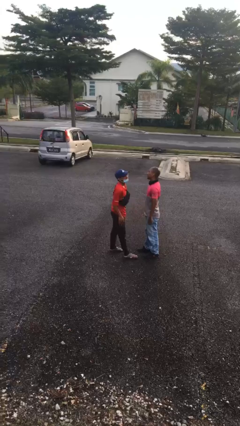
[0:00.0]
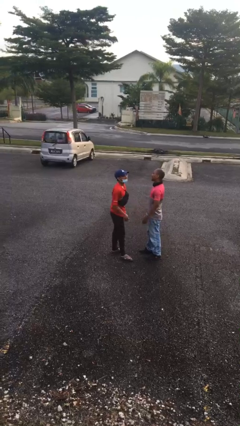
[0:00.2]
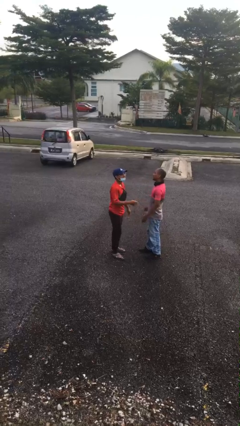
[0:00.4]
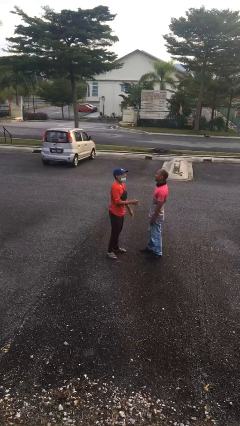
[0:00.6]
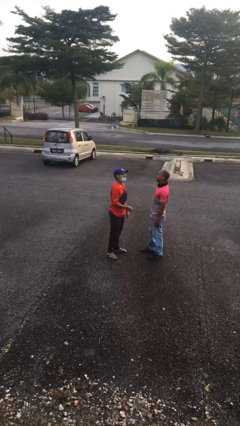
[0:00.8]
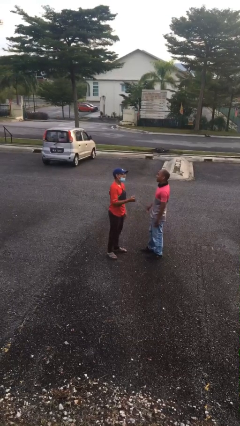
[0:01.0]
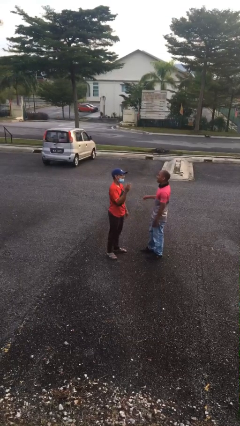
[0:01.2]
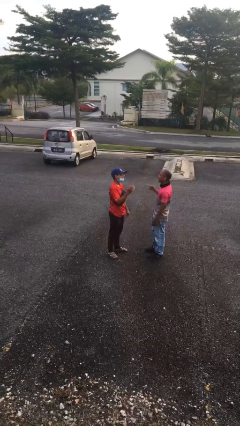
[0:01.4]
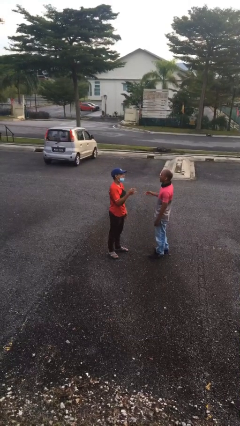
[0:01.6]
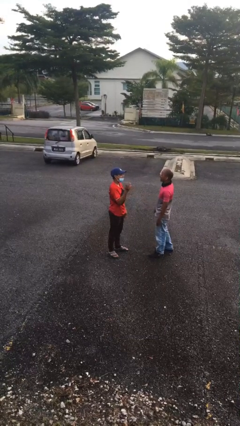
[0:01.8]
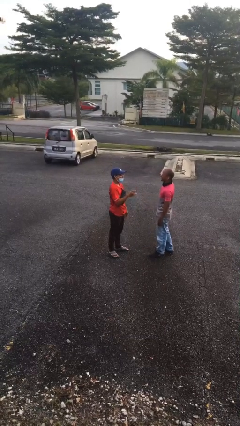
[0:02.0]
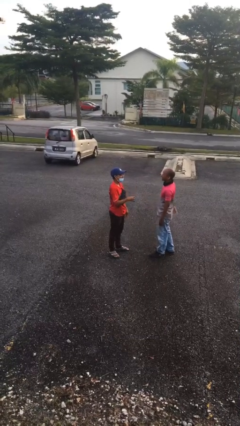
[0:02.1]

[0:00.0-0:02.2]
person talks to person

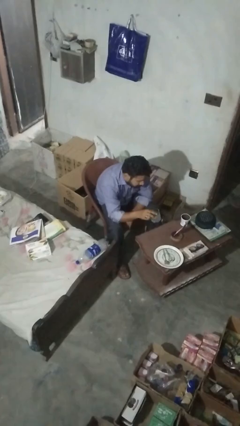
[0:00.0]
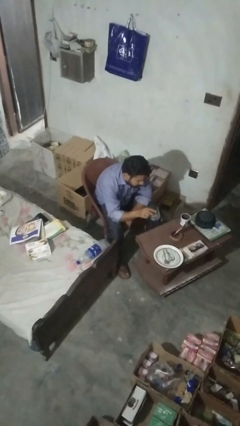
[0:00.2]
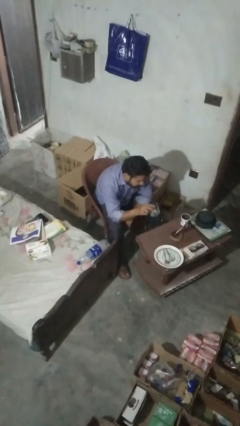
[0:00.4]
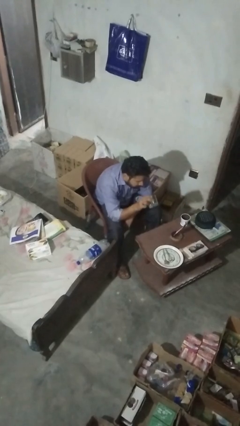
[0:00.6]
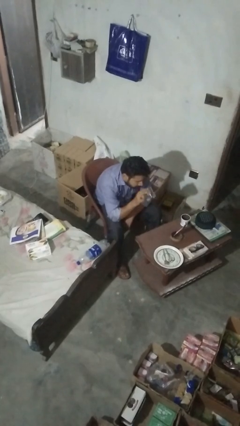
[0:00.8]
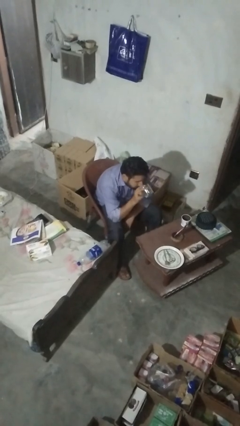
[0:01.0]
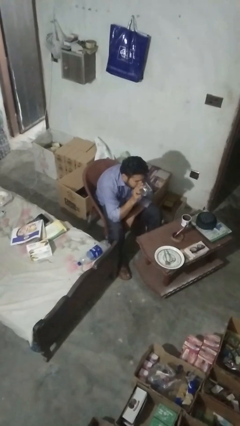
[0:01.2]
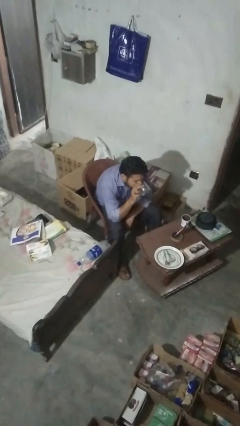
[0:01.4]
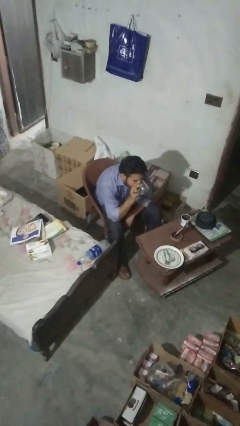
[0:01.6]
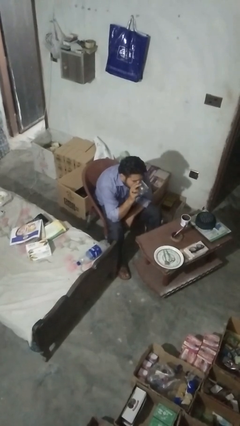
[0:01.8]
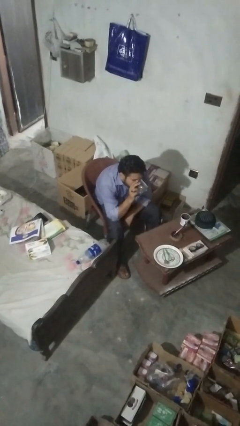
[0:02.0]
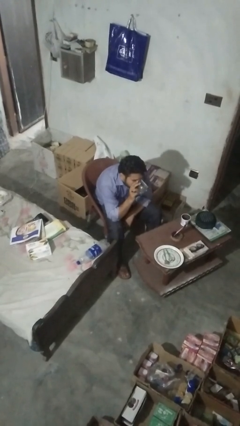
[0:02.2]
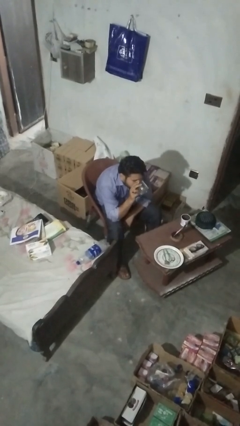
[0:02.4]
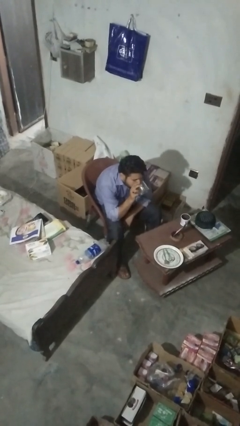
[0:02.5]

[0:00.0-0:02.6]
person drinks from shotglass

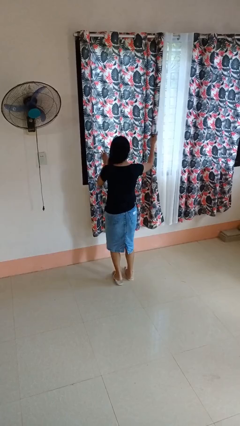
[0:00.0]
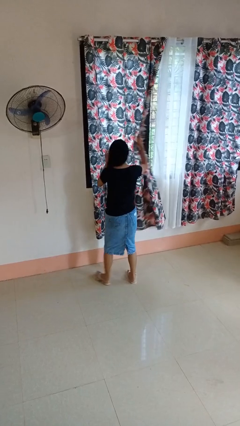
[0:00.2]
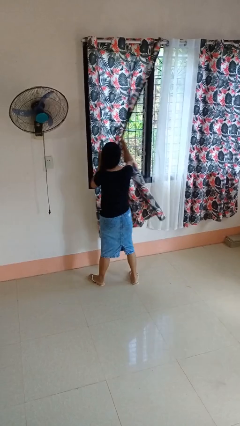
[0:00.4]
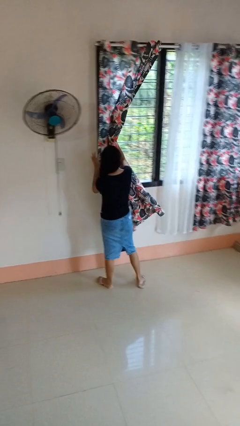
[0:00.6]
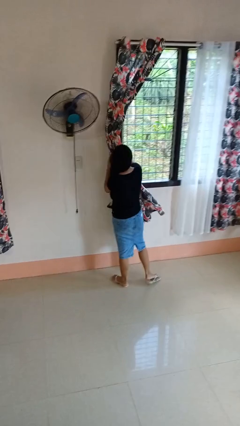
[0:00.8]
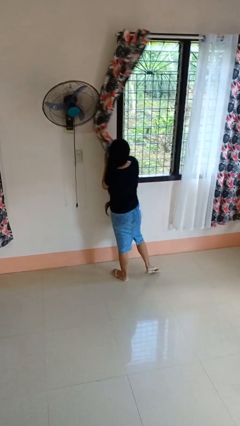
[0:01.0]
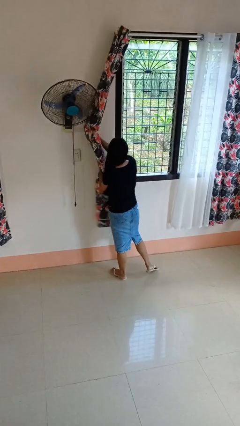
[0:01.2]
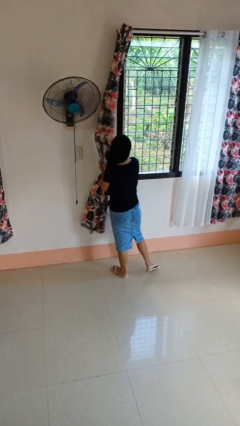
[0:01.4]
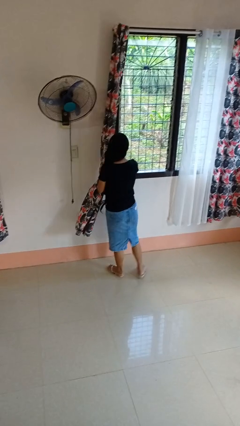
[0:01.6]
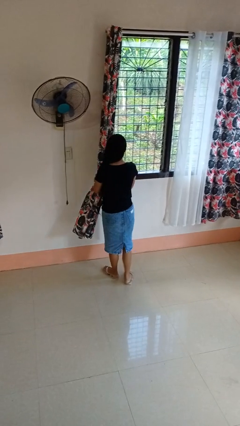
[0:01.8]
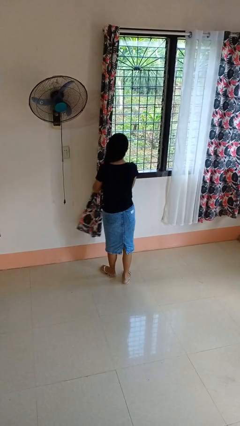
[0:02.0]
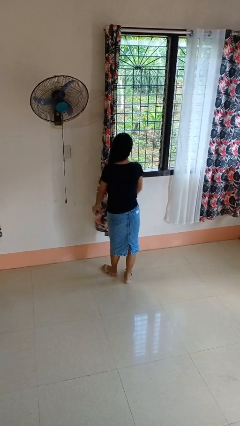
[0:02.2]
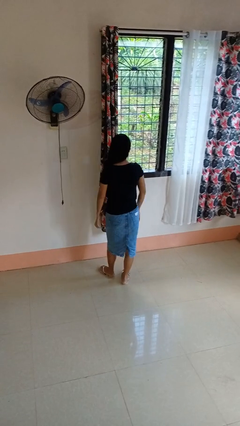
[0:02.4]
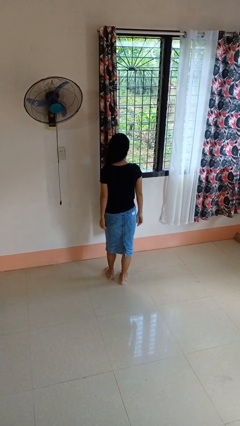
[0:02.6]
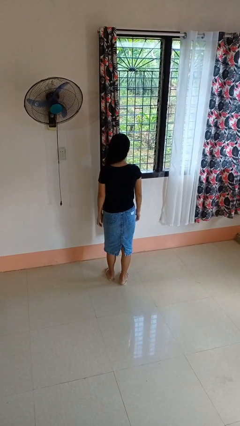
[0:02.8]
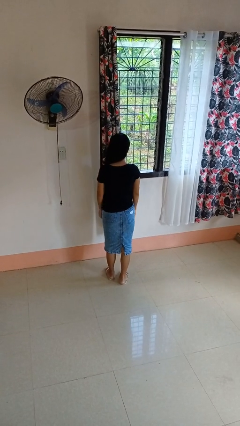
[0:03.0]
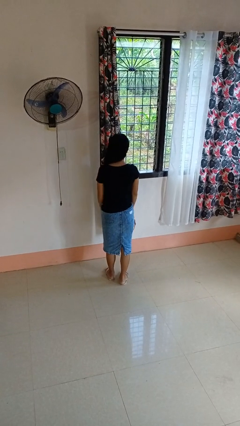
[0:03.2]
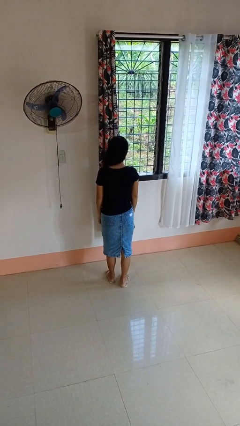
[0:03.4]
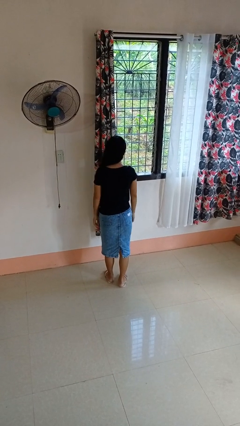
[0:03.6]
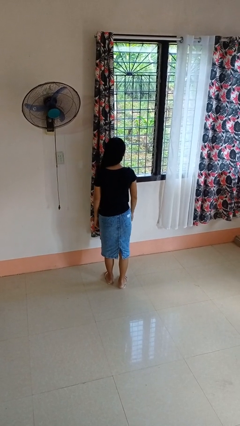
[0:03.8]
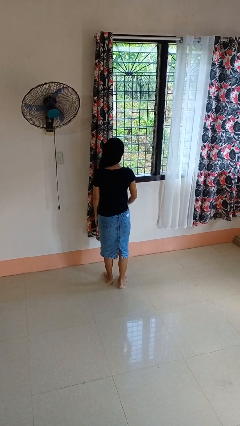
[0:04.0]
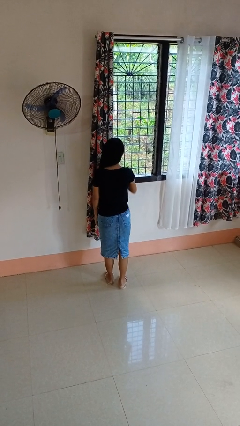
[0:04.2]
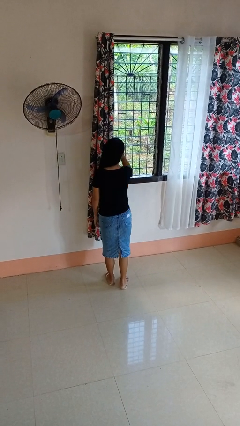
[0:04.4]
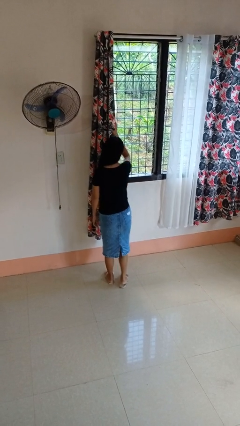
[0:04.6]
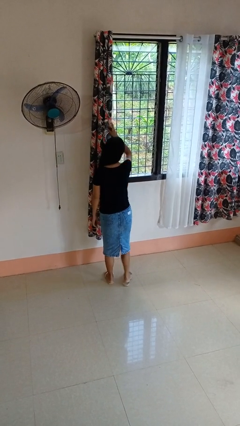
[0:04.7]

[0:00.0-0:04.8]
person opens curtains

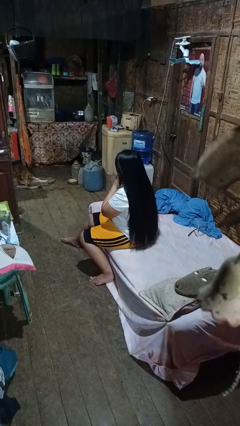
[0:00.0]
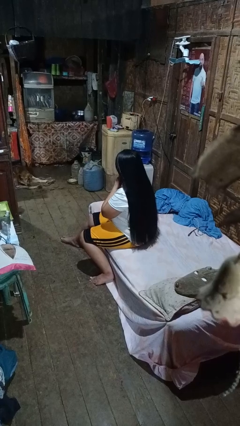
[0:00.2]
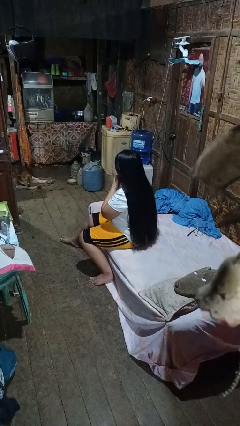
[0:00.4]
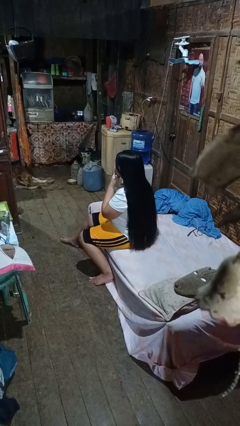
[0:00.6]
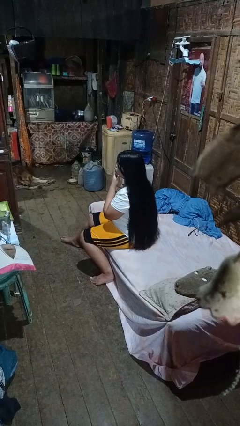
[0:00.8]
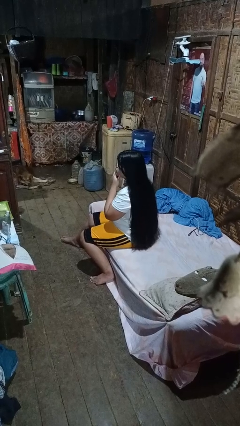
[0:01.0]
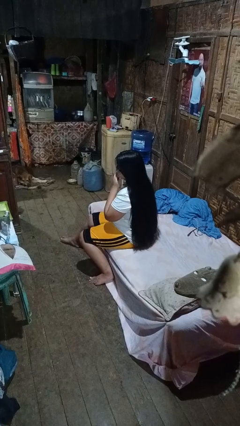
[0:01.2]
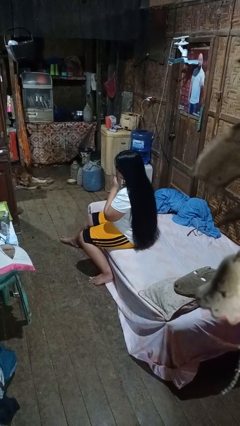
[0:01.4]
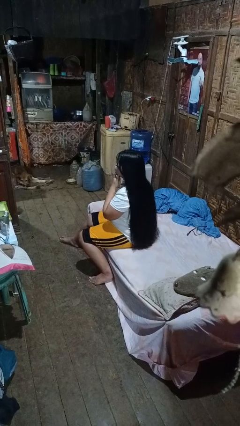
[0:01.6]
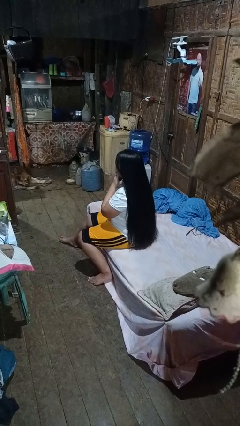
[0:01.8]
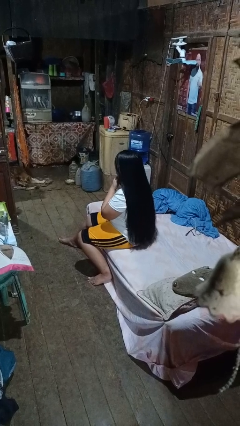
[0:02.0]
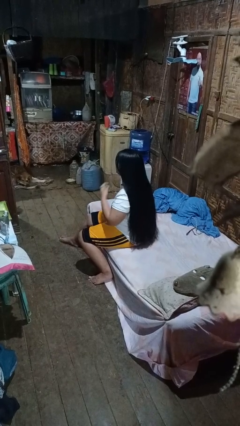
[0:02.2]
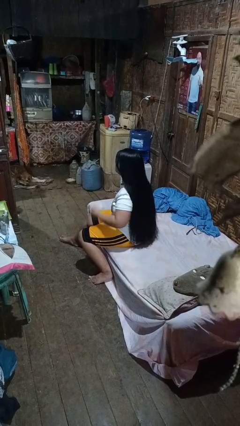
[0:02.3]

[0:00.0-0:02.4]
person strokes chin

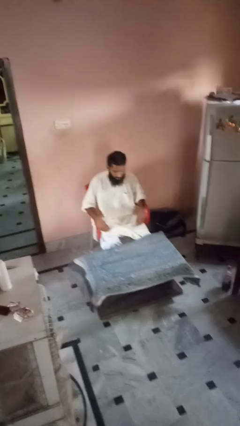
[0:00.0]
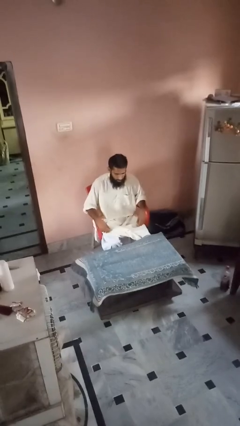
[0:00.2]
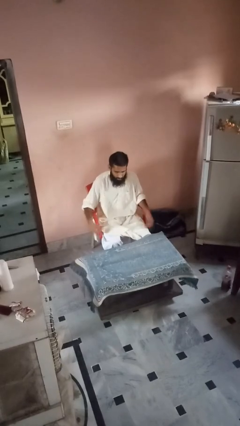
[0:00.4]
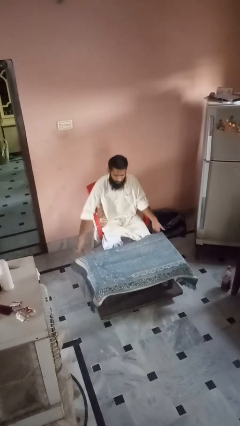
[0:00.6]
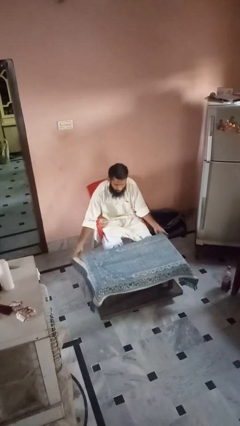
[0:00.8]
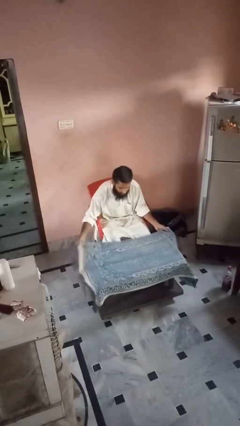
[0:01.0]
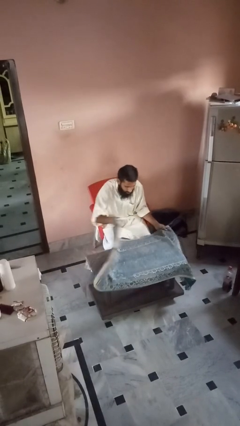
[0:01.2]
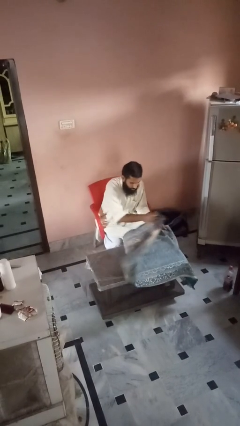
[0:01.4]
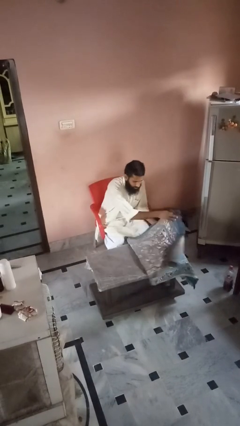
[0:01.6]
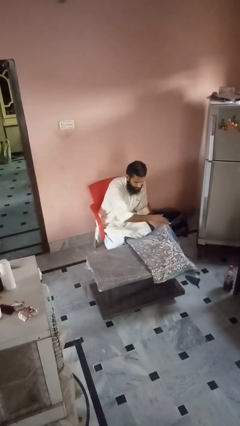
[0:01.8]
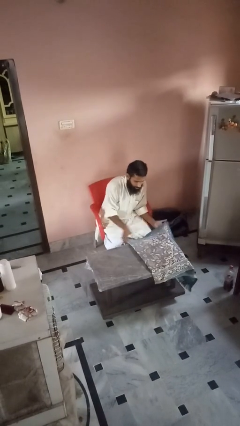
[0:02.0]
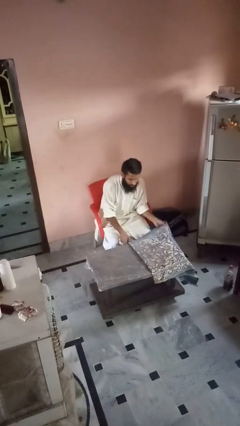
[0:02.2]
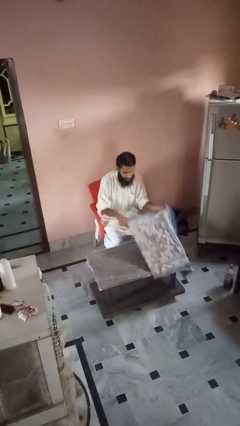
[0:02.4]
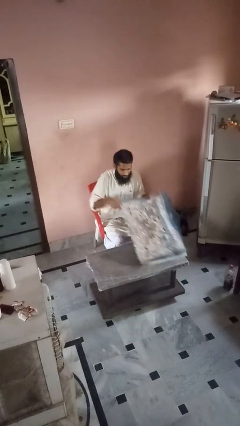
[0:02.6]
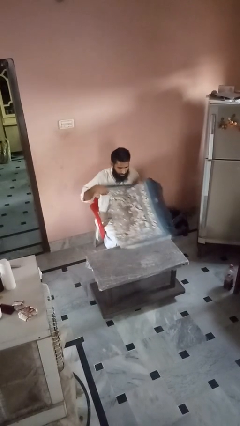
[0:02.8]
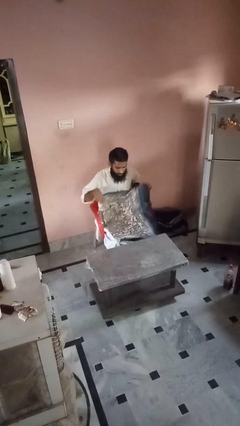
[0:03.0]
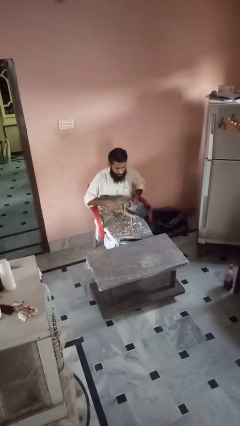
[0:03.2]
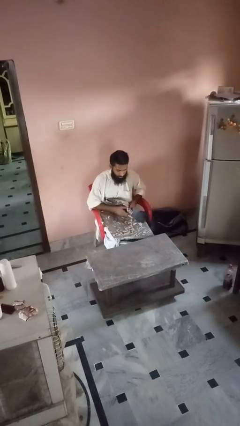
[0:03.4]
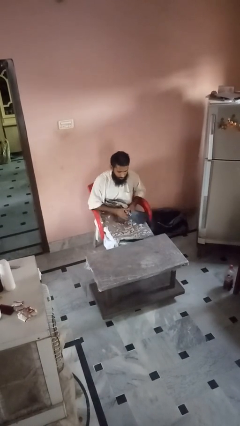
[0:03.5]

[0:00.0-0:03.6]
person folds tablecloth

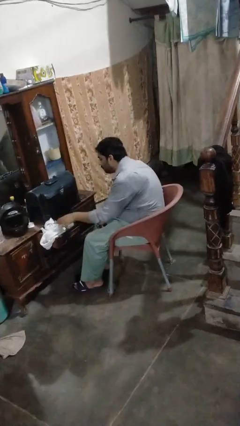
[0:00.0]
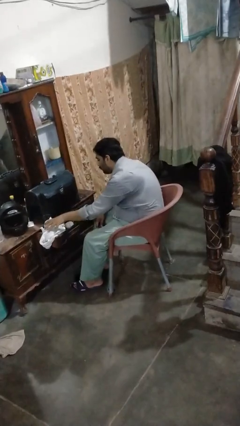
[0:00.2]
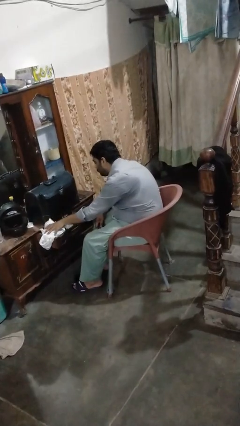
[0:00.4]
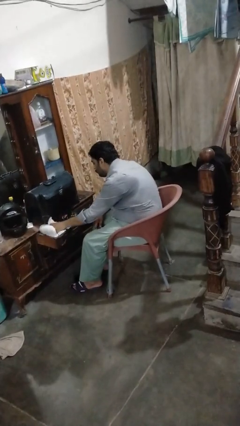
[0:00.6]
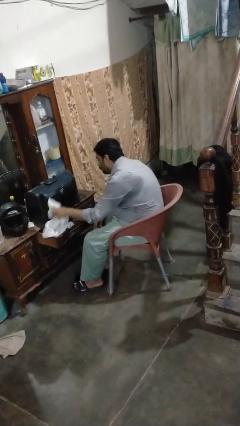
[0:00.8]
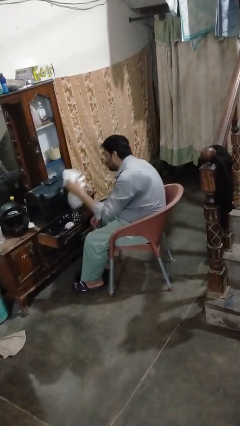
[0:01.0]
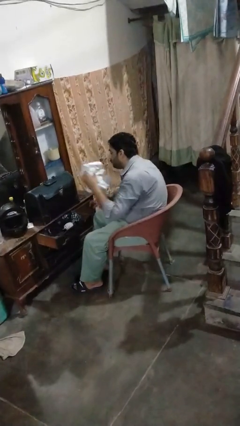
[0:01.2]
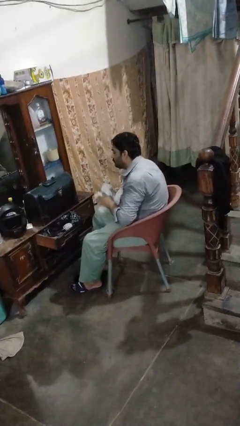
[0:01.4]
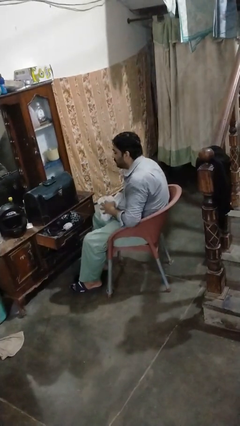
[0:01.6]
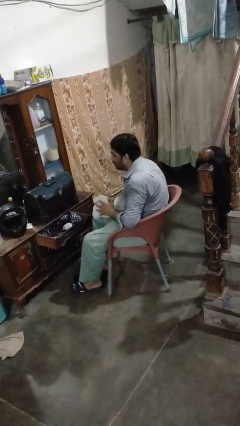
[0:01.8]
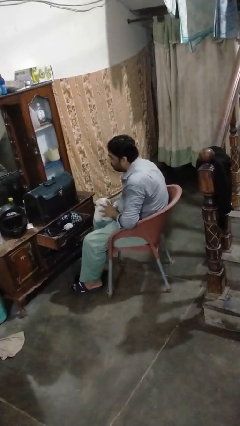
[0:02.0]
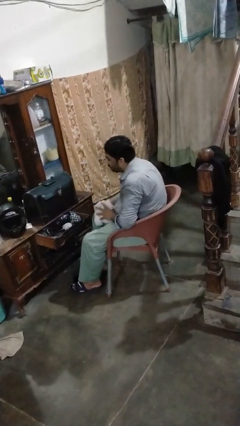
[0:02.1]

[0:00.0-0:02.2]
person takes clothes from dresser
